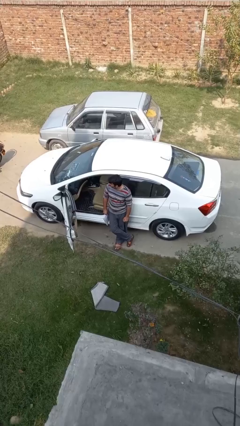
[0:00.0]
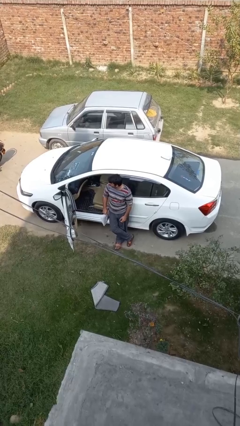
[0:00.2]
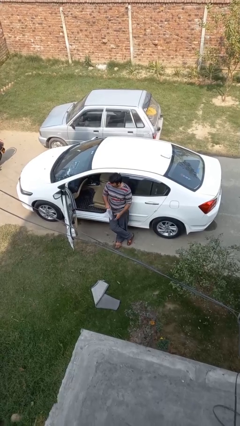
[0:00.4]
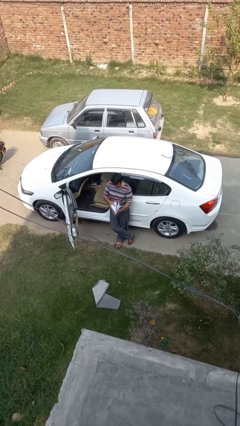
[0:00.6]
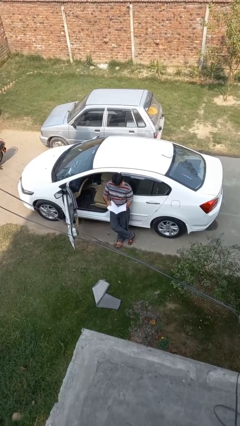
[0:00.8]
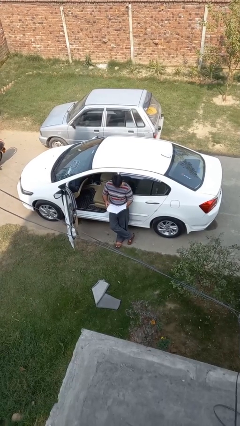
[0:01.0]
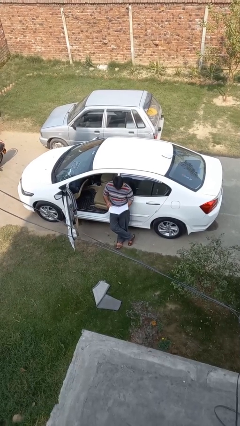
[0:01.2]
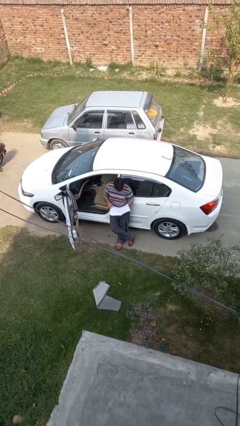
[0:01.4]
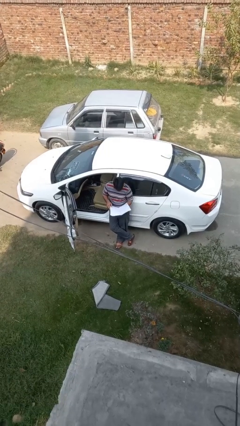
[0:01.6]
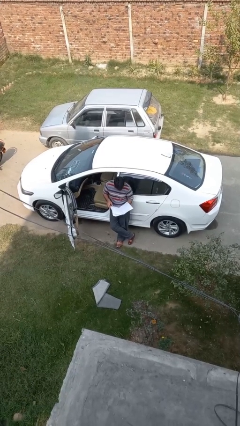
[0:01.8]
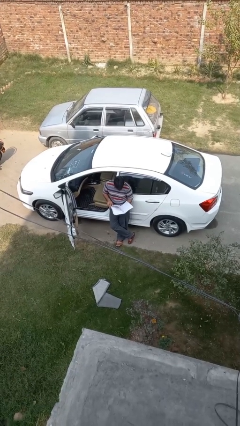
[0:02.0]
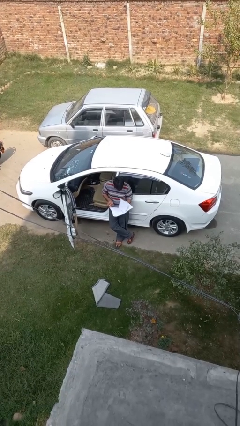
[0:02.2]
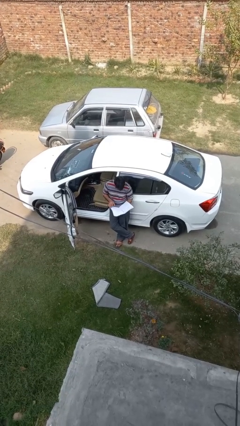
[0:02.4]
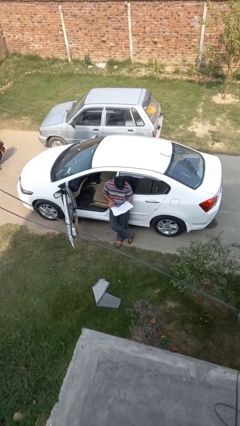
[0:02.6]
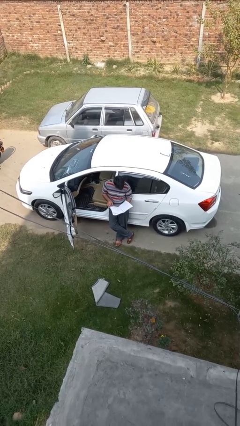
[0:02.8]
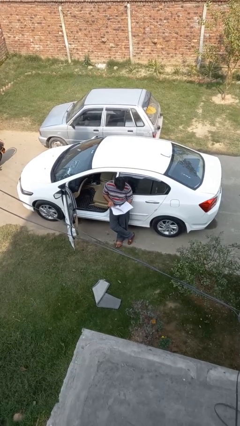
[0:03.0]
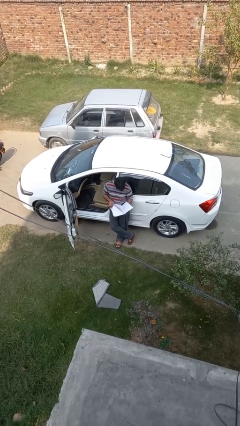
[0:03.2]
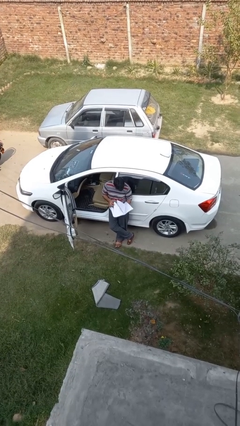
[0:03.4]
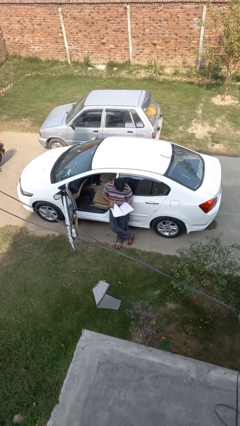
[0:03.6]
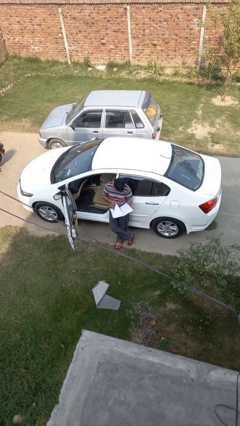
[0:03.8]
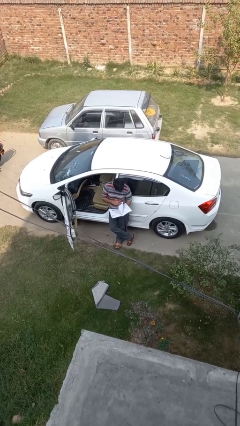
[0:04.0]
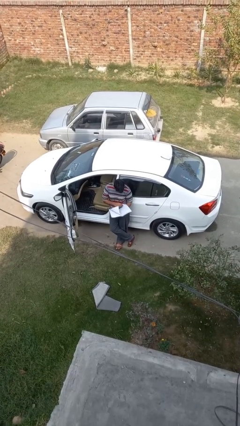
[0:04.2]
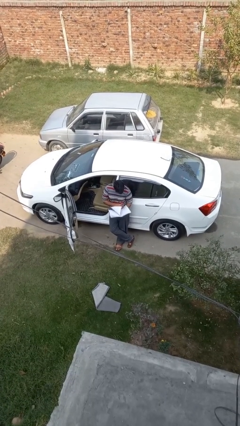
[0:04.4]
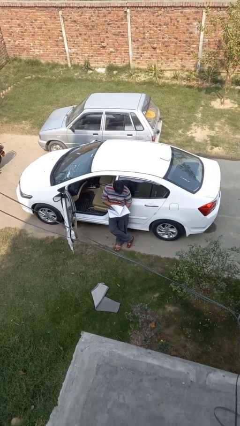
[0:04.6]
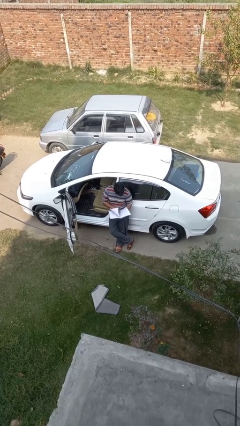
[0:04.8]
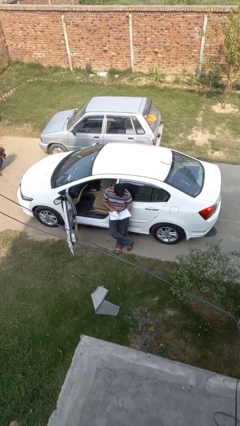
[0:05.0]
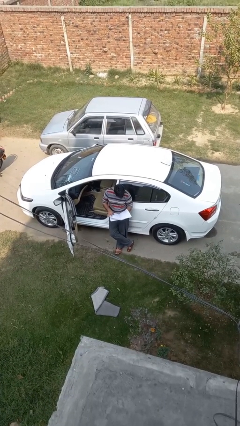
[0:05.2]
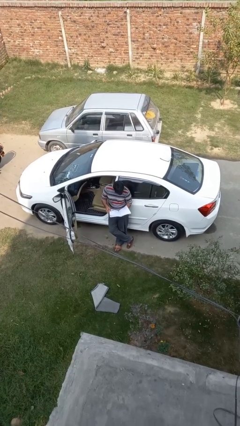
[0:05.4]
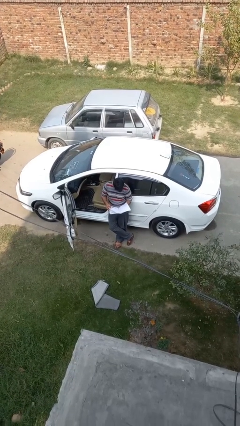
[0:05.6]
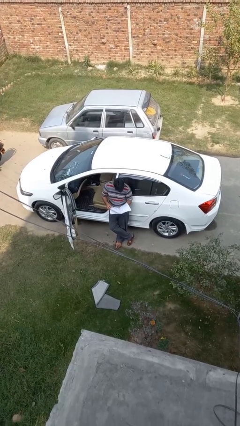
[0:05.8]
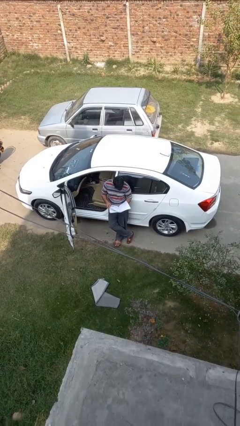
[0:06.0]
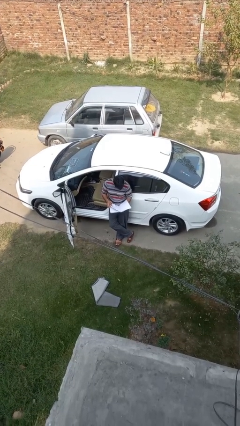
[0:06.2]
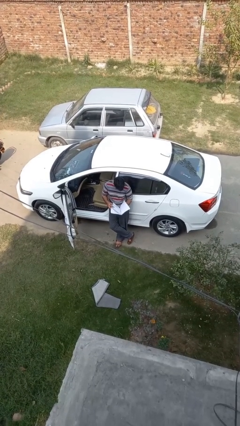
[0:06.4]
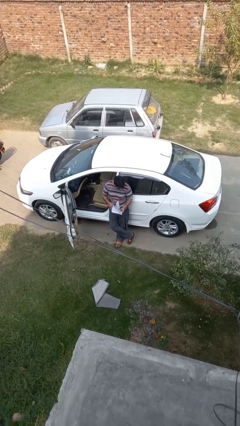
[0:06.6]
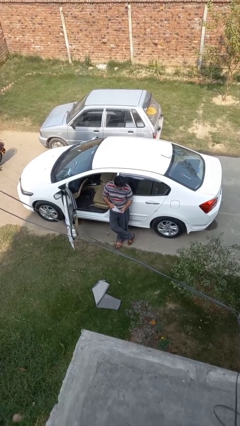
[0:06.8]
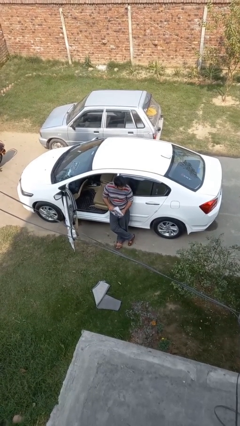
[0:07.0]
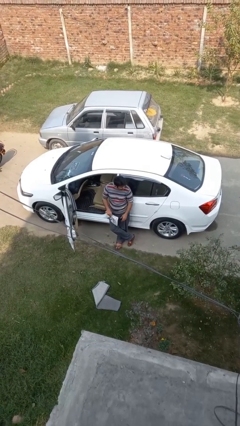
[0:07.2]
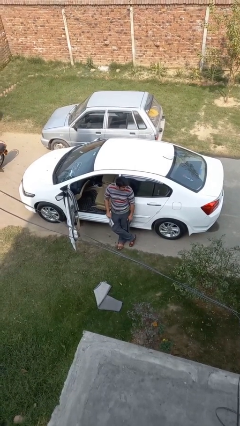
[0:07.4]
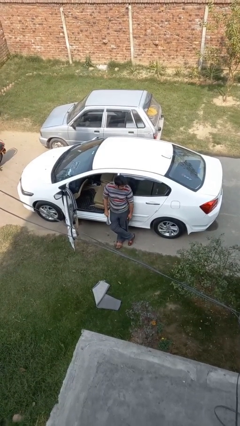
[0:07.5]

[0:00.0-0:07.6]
person reads document

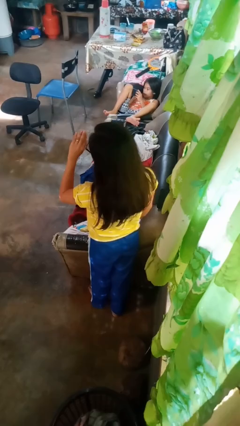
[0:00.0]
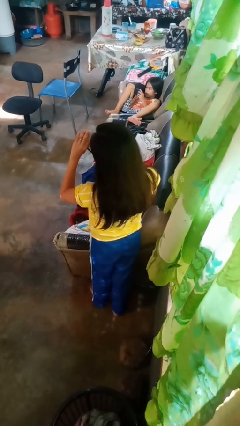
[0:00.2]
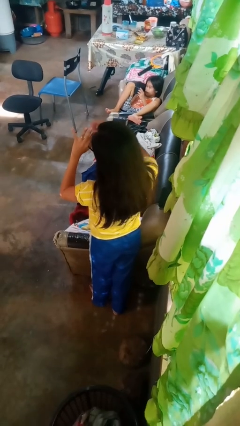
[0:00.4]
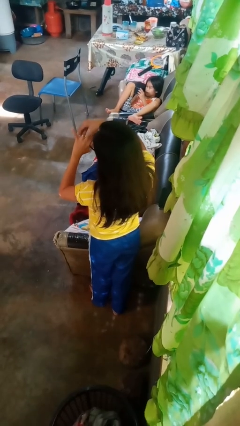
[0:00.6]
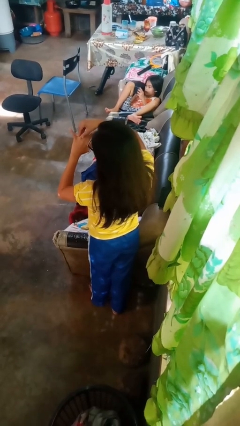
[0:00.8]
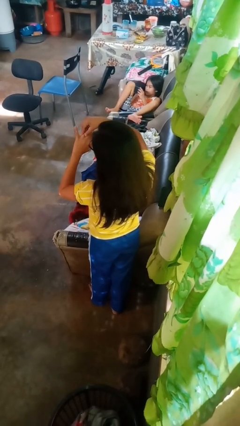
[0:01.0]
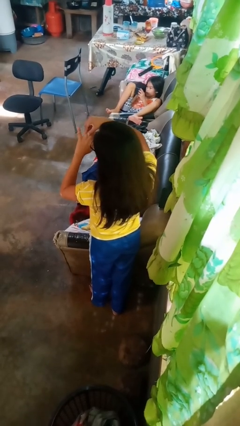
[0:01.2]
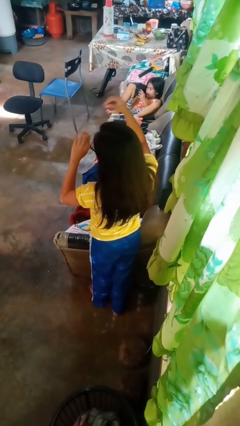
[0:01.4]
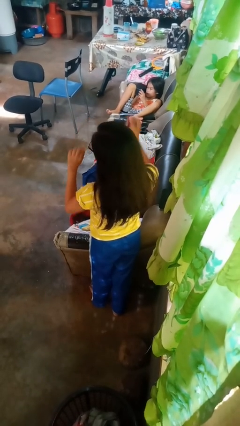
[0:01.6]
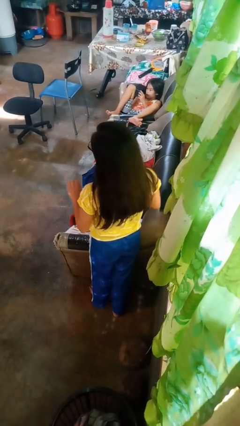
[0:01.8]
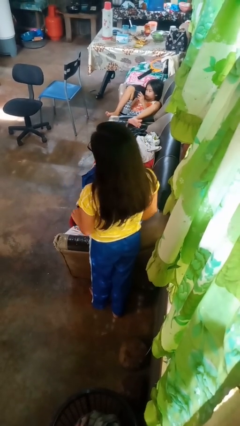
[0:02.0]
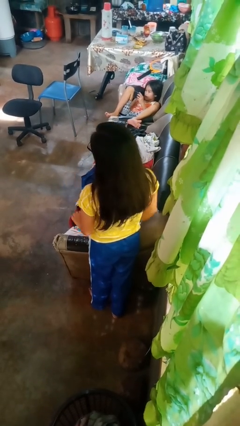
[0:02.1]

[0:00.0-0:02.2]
person takes off ring

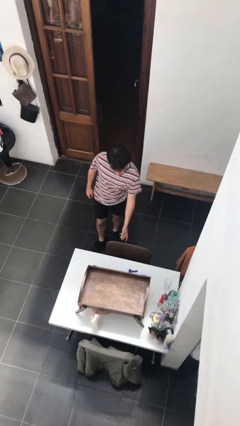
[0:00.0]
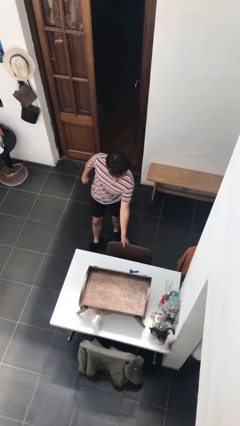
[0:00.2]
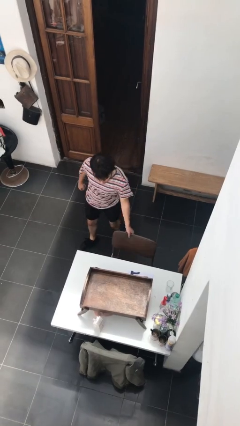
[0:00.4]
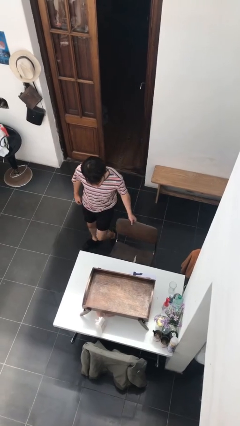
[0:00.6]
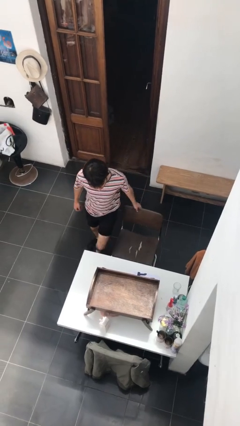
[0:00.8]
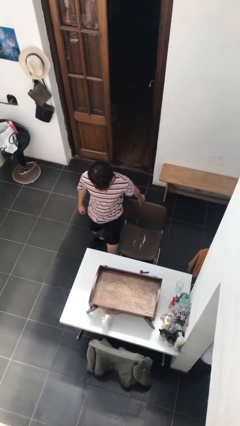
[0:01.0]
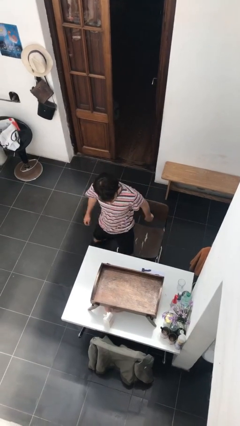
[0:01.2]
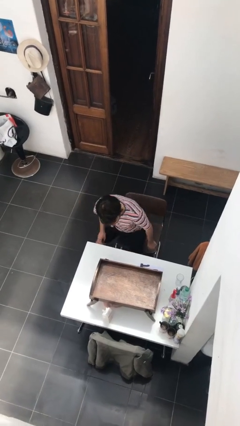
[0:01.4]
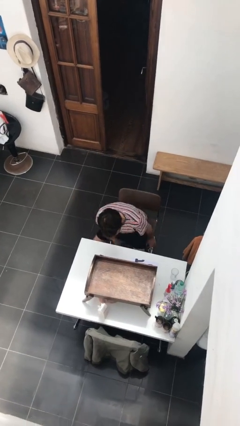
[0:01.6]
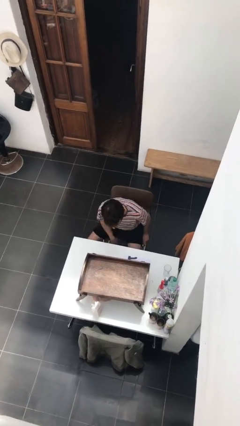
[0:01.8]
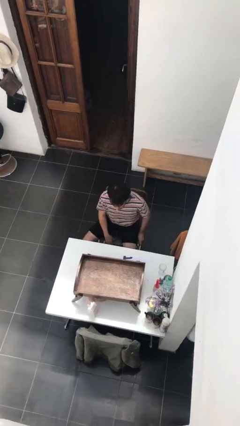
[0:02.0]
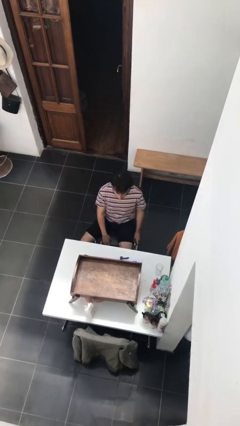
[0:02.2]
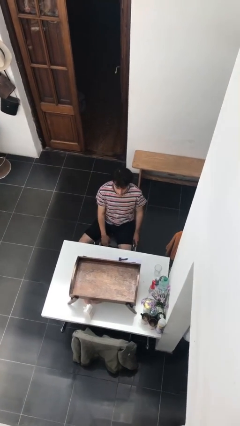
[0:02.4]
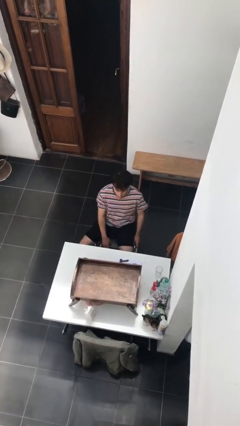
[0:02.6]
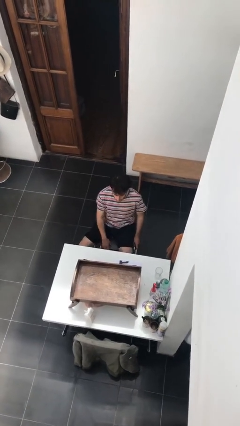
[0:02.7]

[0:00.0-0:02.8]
person sits down

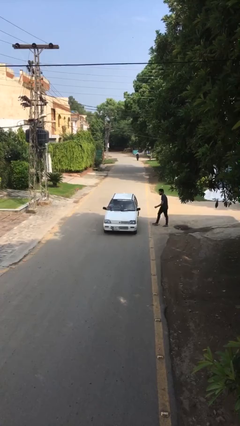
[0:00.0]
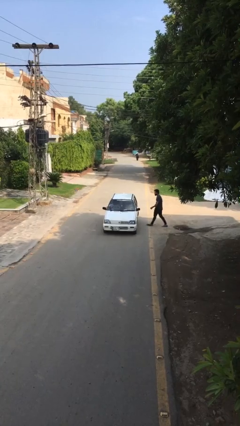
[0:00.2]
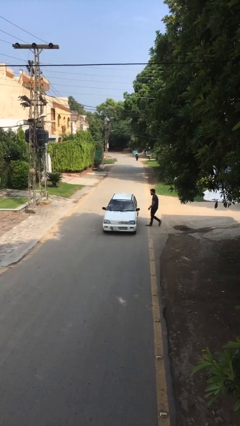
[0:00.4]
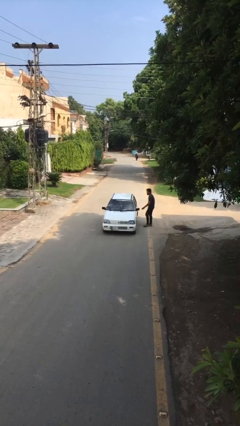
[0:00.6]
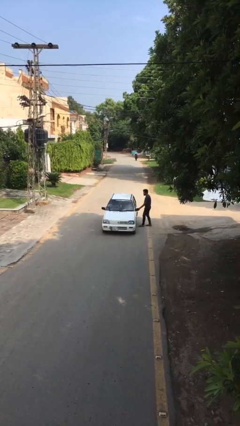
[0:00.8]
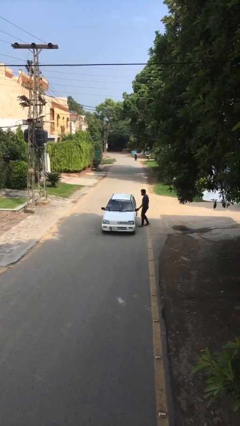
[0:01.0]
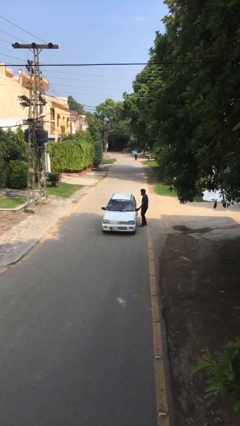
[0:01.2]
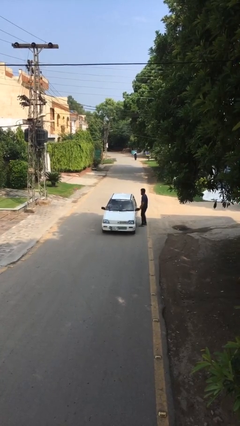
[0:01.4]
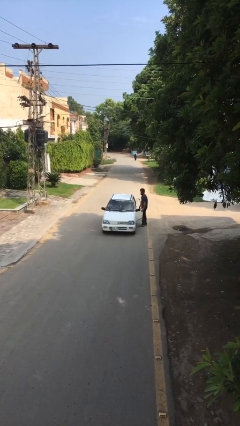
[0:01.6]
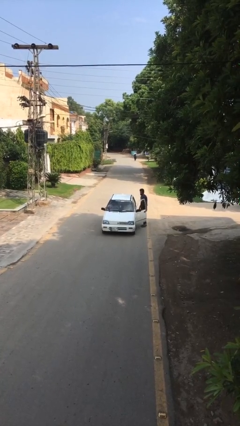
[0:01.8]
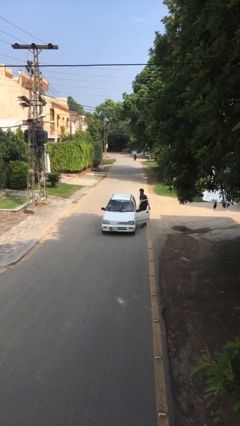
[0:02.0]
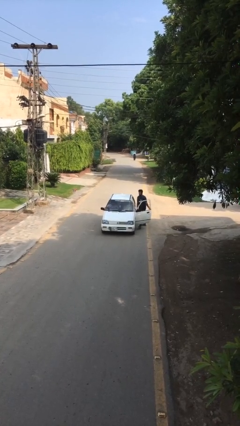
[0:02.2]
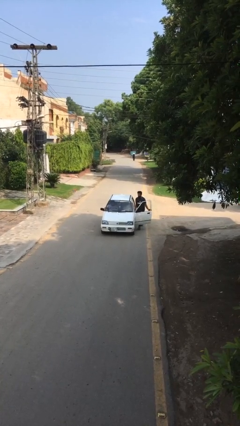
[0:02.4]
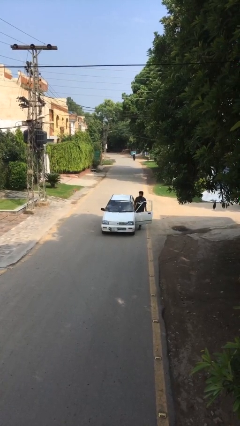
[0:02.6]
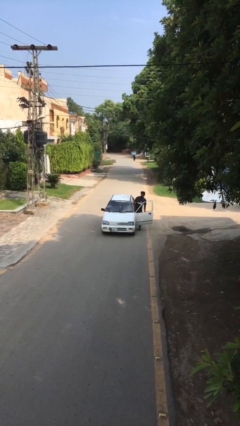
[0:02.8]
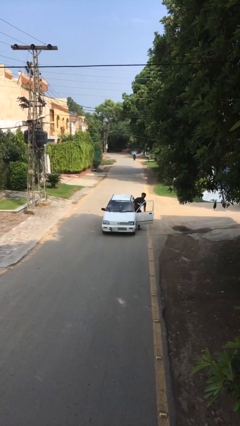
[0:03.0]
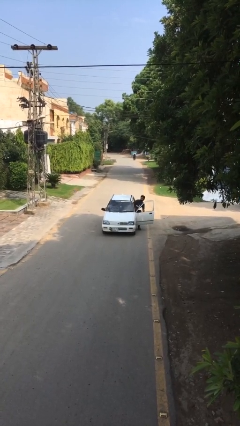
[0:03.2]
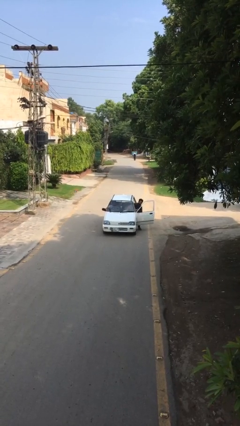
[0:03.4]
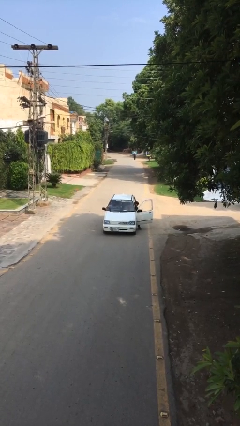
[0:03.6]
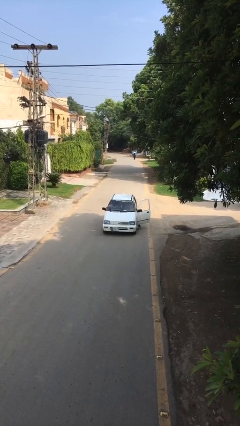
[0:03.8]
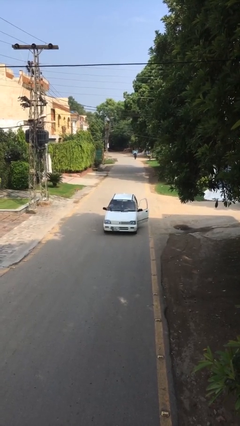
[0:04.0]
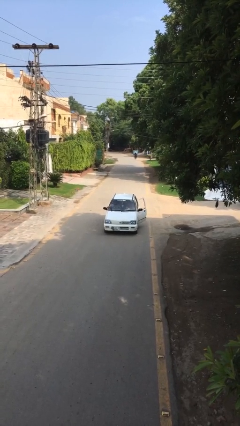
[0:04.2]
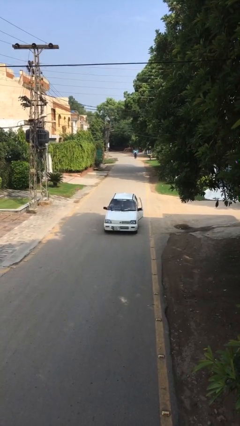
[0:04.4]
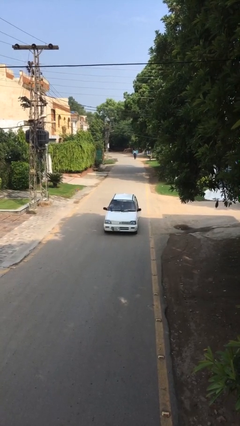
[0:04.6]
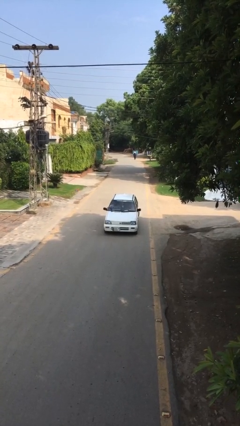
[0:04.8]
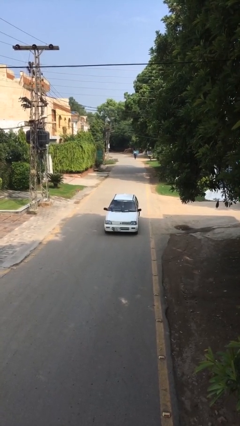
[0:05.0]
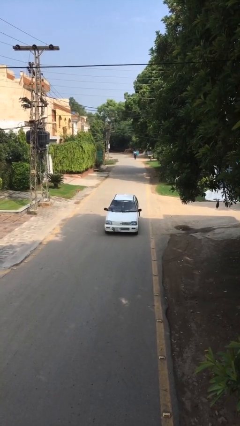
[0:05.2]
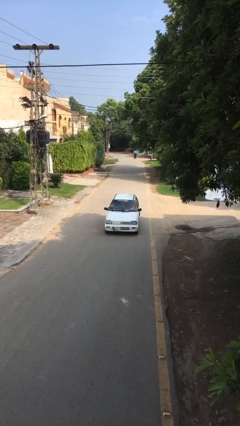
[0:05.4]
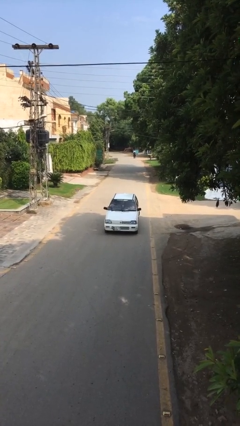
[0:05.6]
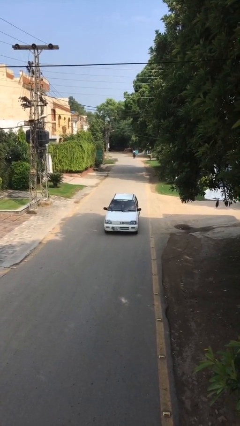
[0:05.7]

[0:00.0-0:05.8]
car picks up person
